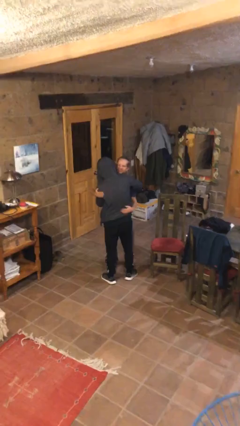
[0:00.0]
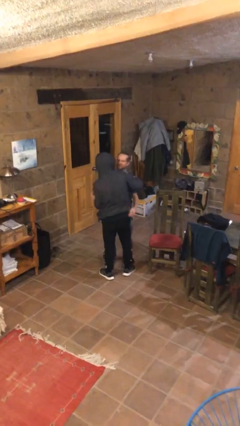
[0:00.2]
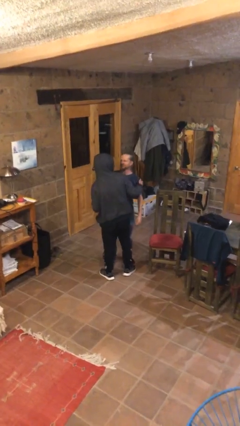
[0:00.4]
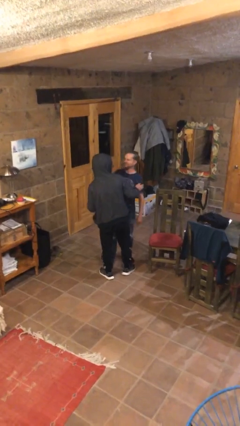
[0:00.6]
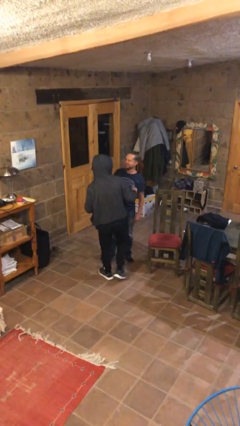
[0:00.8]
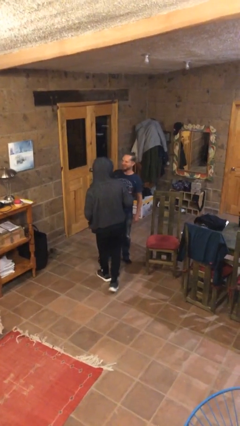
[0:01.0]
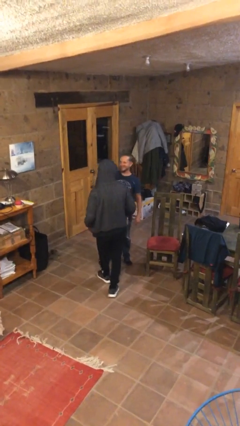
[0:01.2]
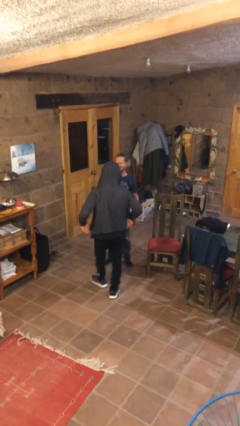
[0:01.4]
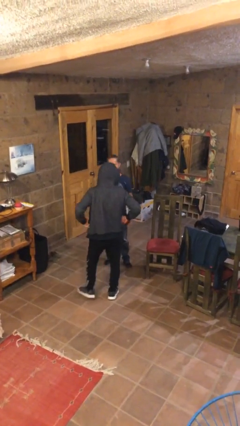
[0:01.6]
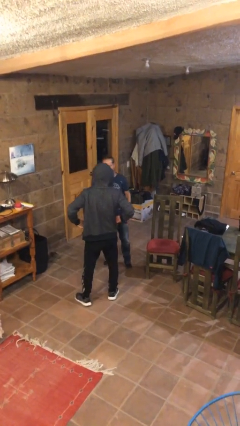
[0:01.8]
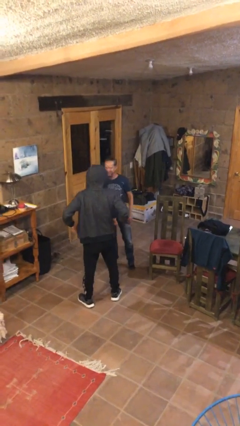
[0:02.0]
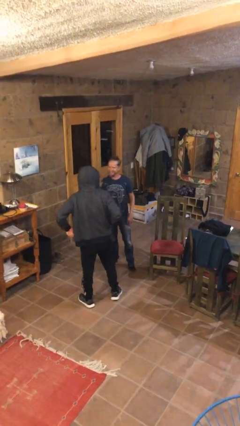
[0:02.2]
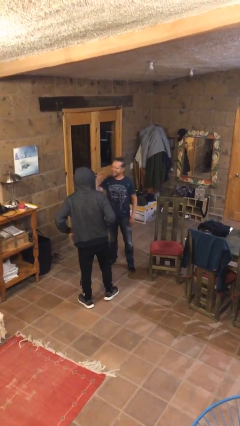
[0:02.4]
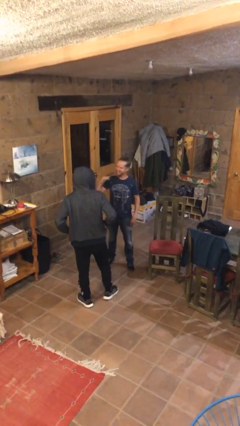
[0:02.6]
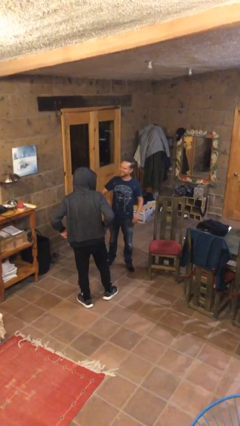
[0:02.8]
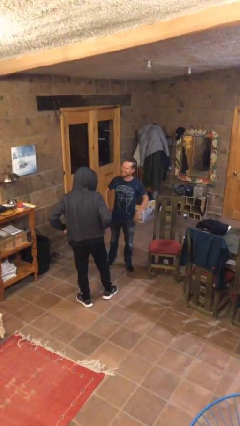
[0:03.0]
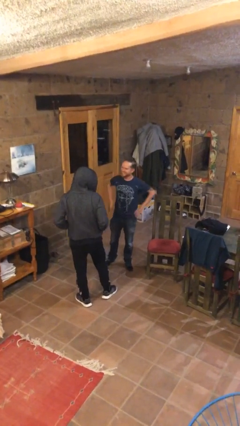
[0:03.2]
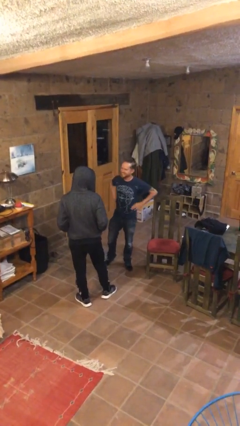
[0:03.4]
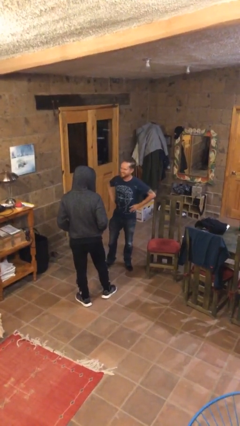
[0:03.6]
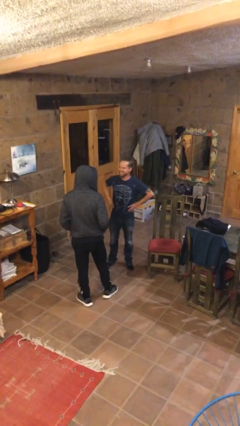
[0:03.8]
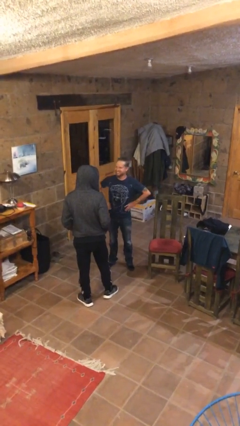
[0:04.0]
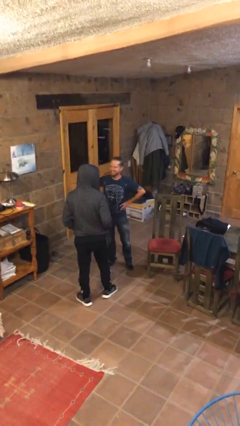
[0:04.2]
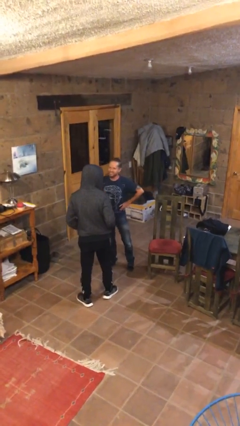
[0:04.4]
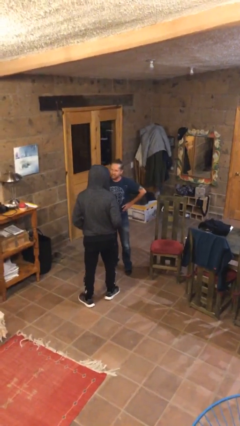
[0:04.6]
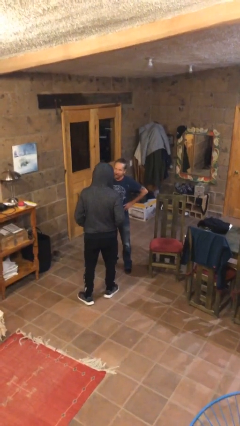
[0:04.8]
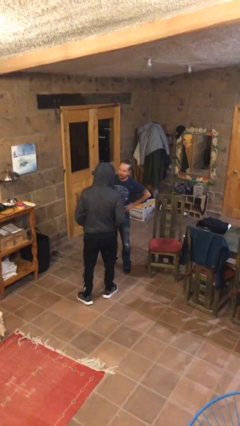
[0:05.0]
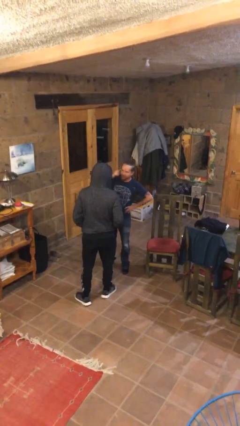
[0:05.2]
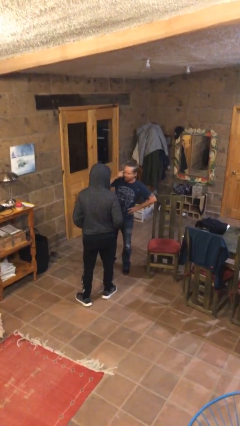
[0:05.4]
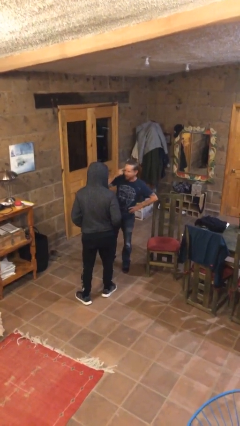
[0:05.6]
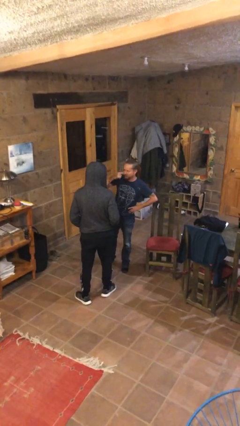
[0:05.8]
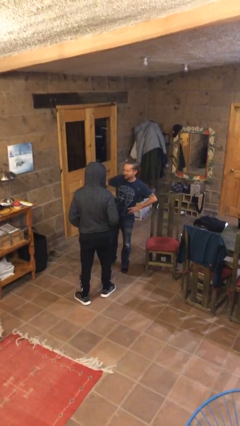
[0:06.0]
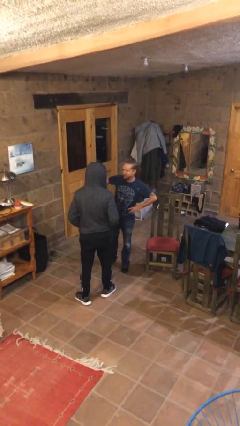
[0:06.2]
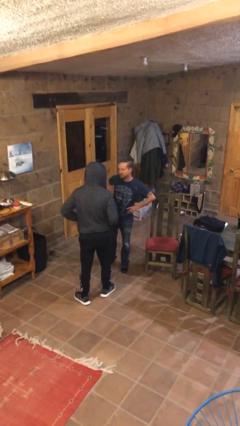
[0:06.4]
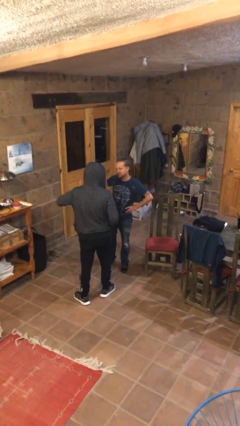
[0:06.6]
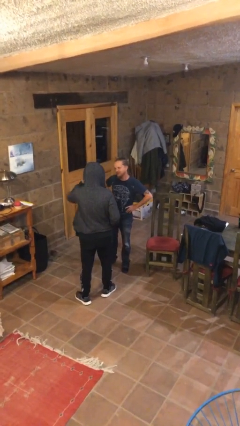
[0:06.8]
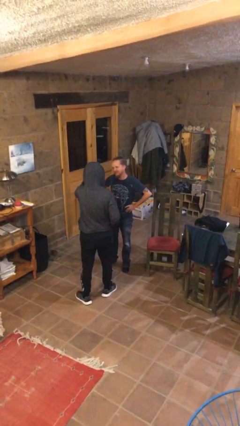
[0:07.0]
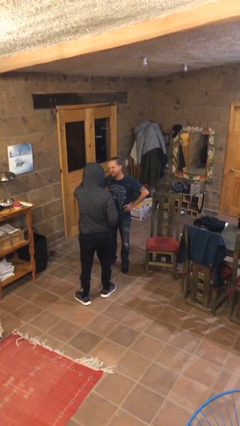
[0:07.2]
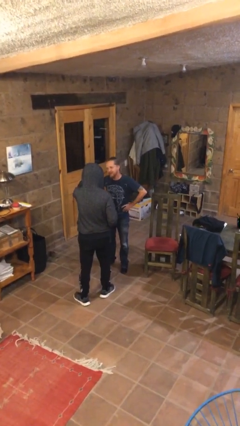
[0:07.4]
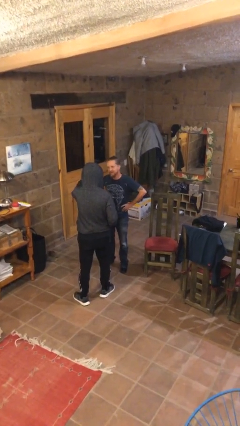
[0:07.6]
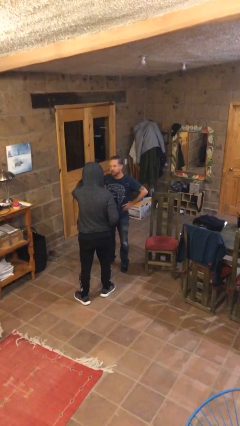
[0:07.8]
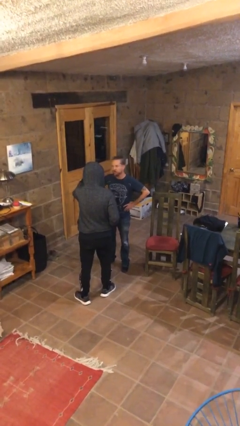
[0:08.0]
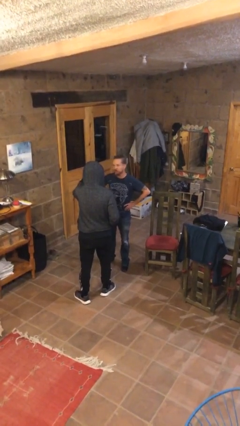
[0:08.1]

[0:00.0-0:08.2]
person talks to person

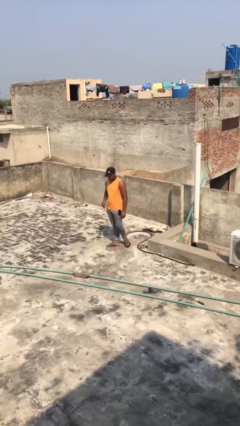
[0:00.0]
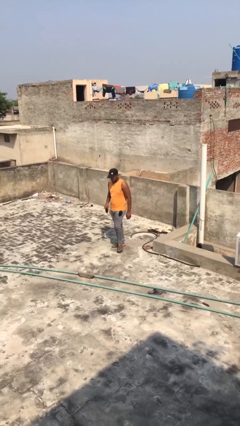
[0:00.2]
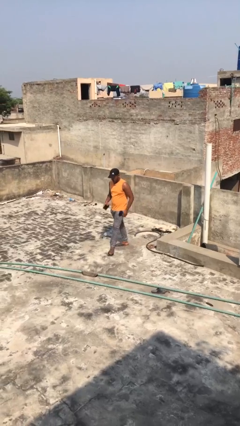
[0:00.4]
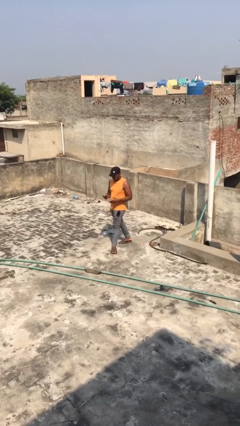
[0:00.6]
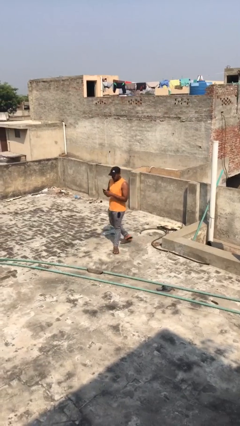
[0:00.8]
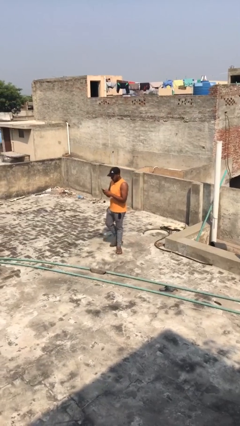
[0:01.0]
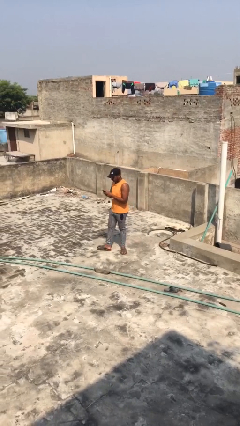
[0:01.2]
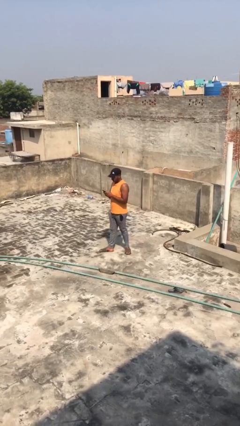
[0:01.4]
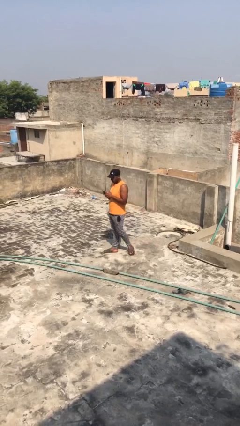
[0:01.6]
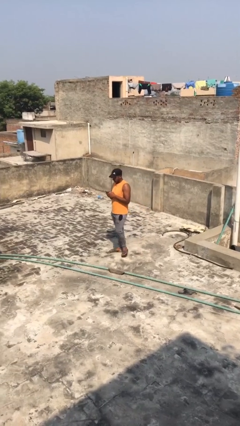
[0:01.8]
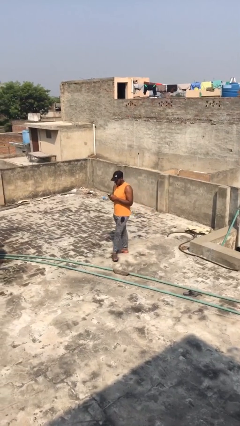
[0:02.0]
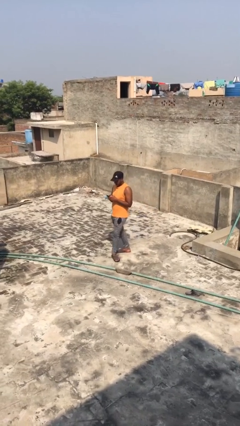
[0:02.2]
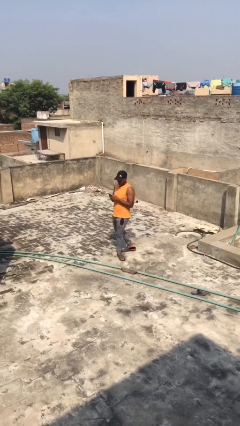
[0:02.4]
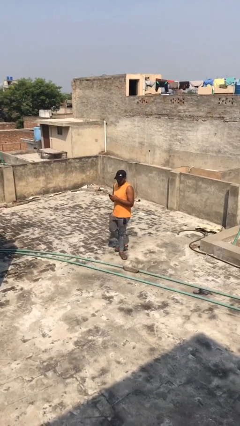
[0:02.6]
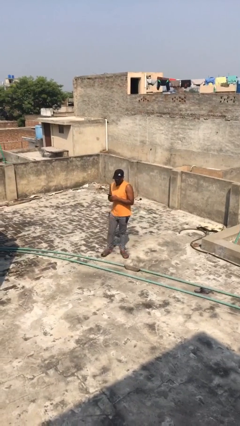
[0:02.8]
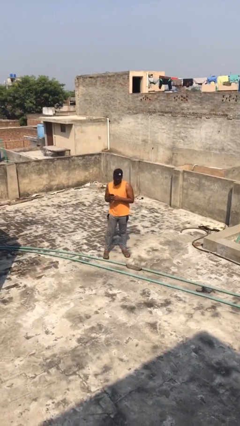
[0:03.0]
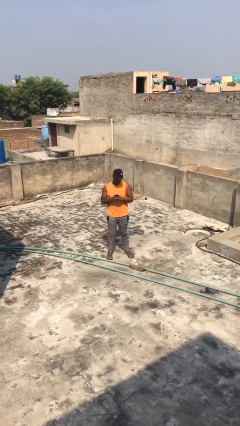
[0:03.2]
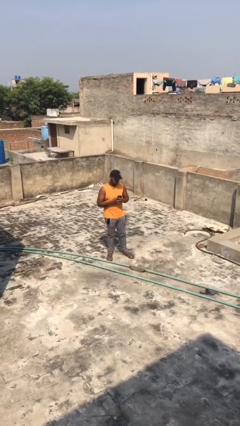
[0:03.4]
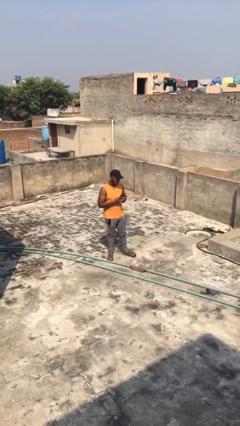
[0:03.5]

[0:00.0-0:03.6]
person texts on phone

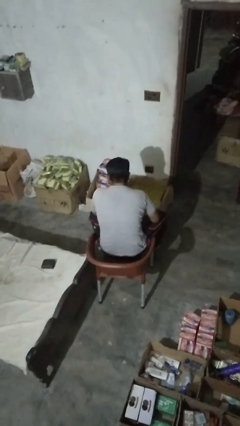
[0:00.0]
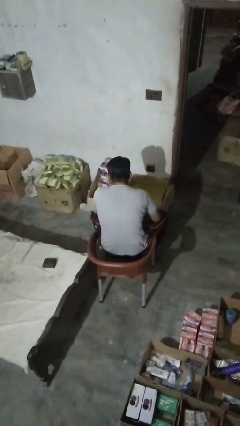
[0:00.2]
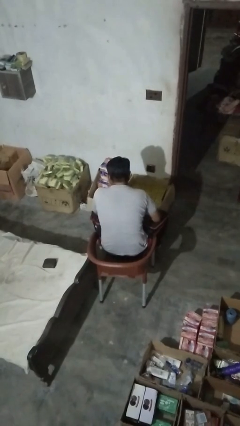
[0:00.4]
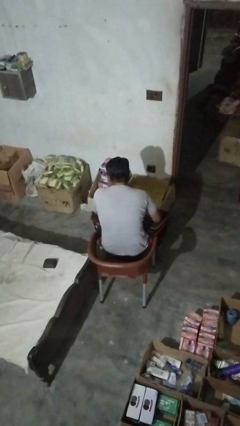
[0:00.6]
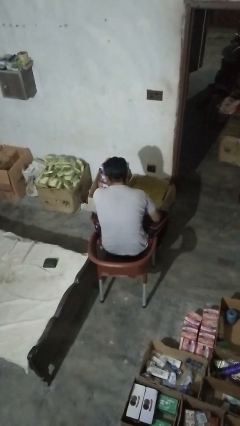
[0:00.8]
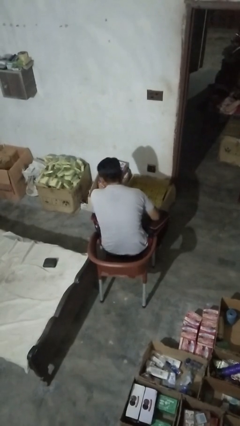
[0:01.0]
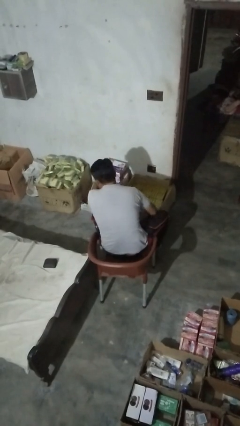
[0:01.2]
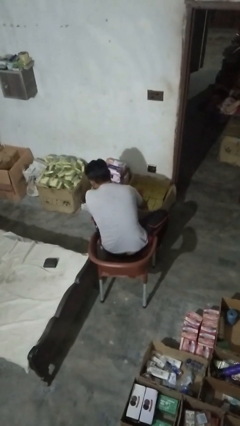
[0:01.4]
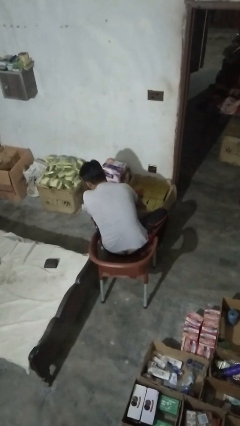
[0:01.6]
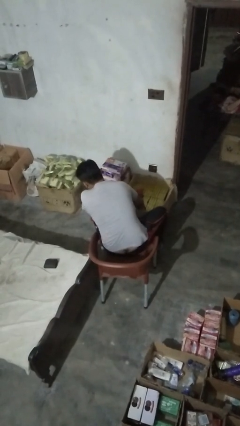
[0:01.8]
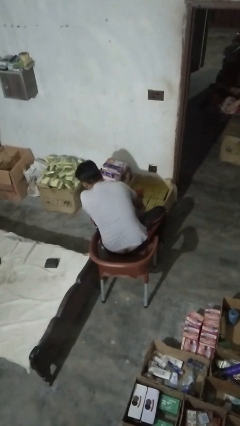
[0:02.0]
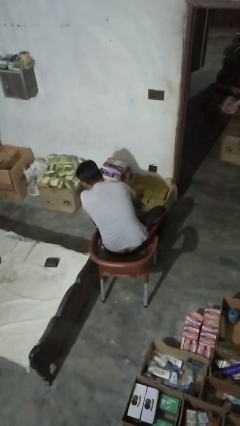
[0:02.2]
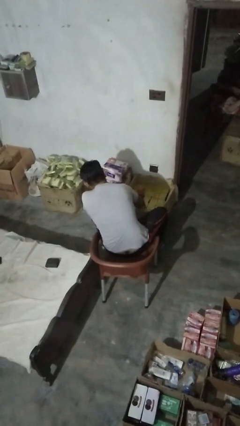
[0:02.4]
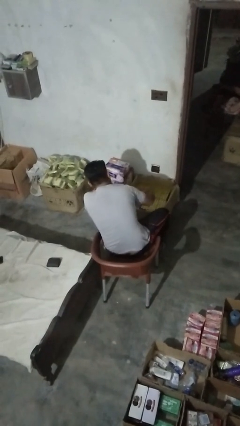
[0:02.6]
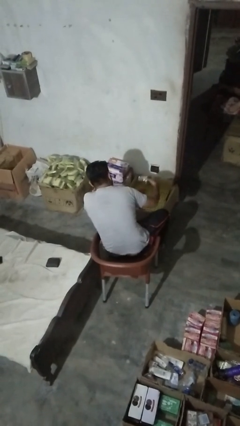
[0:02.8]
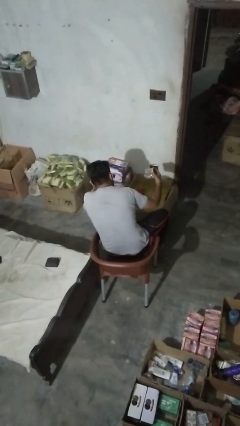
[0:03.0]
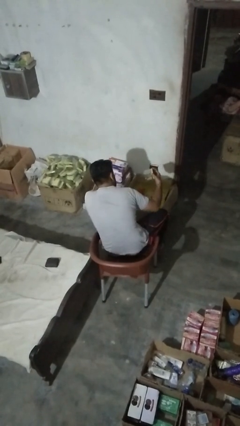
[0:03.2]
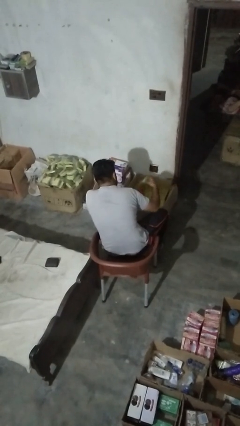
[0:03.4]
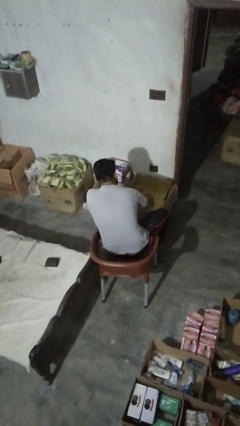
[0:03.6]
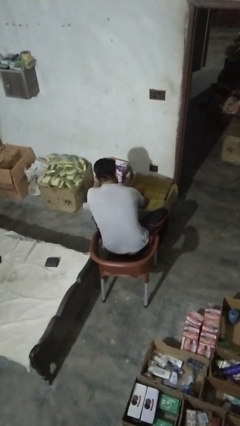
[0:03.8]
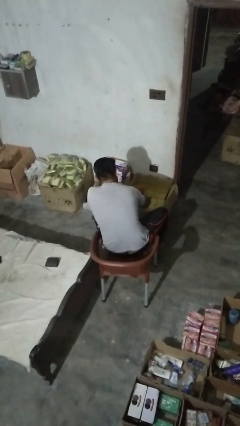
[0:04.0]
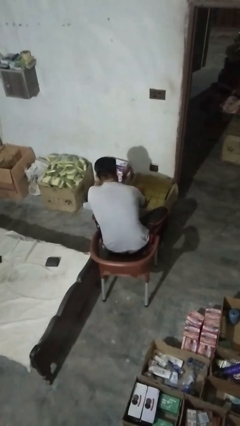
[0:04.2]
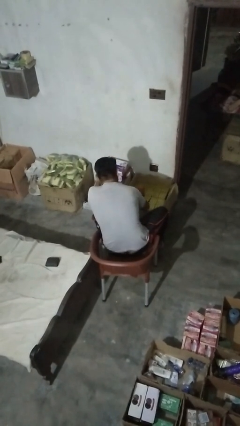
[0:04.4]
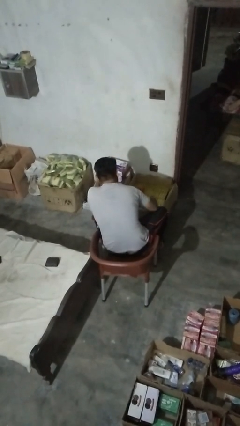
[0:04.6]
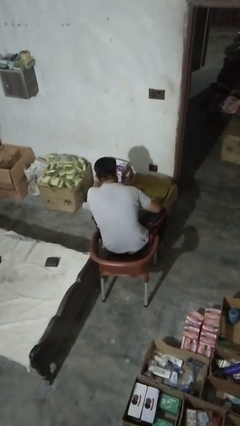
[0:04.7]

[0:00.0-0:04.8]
person searches in box

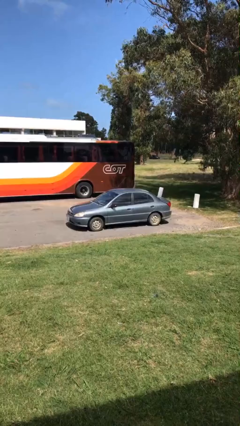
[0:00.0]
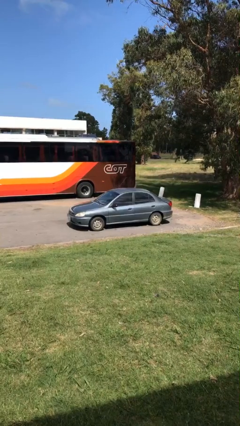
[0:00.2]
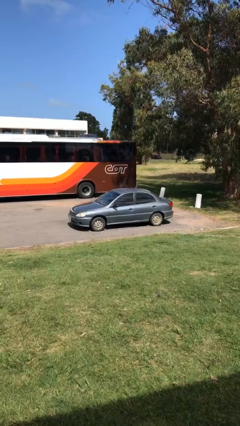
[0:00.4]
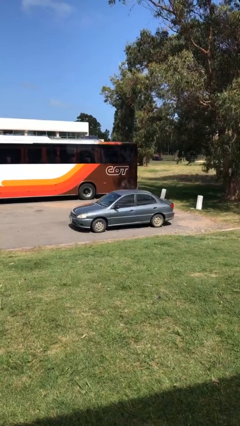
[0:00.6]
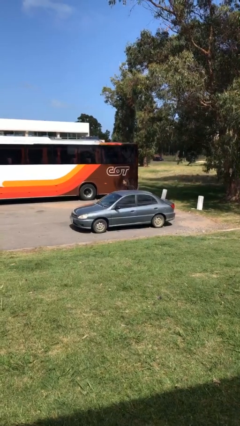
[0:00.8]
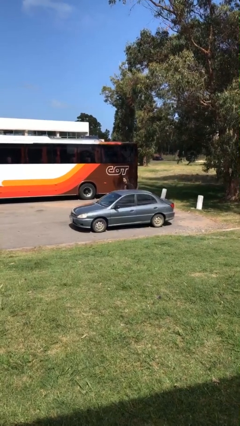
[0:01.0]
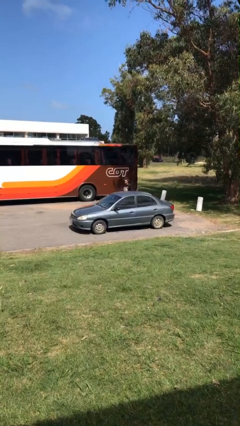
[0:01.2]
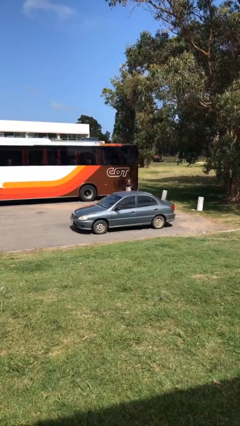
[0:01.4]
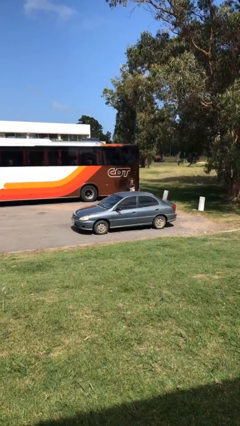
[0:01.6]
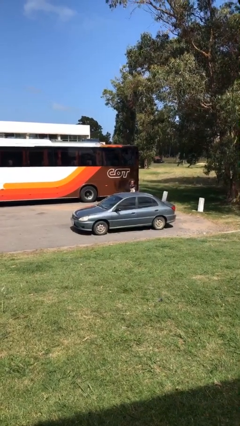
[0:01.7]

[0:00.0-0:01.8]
car drops off person
